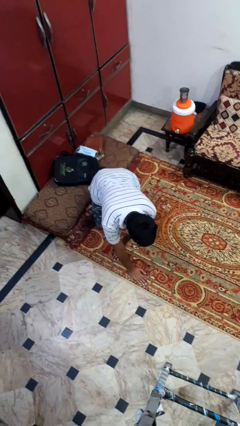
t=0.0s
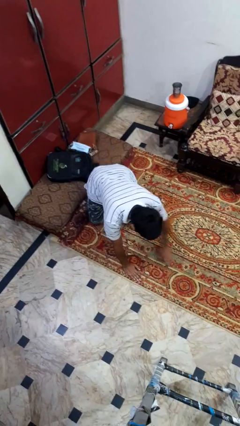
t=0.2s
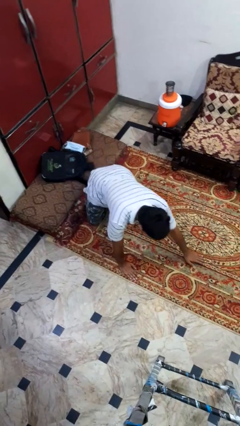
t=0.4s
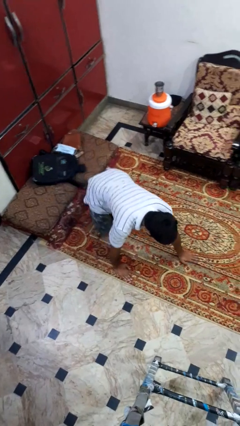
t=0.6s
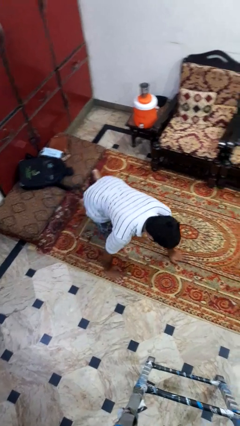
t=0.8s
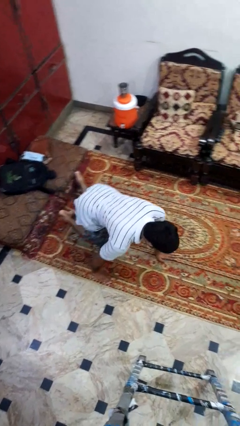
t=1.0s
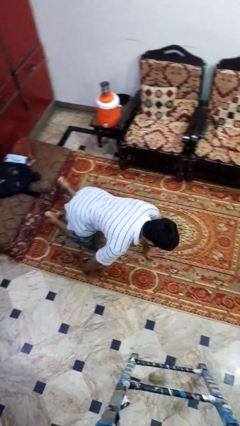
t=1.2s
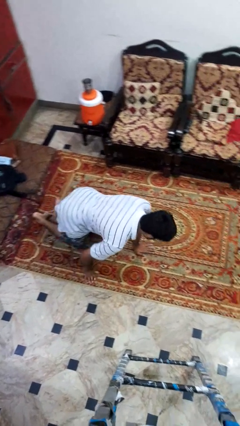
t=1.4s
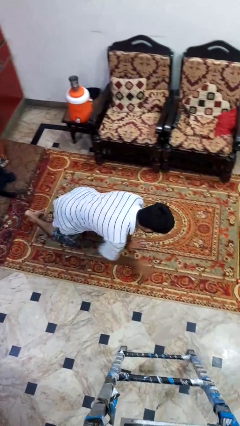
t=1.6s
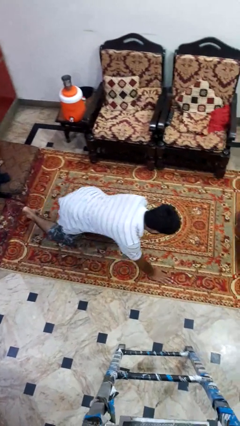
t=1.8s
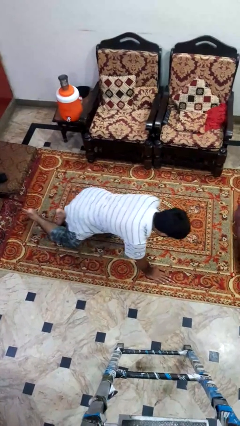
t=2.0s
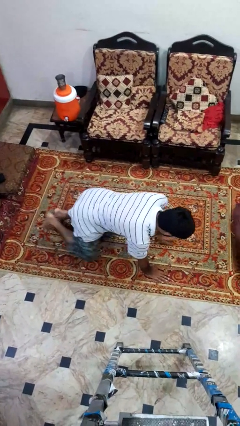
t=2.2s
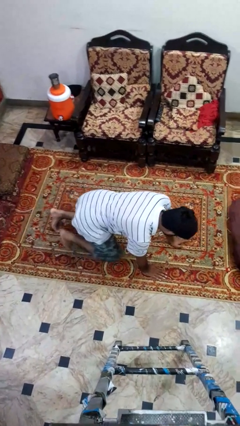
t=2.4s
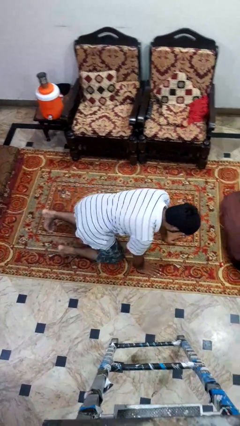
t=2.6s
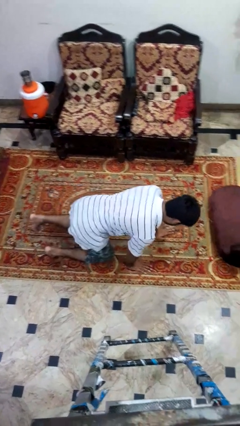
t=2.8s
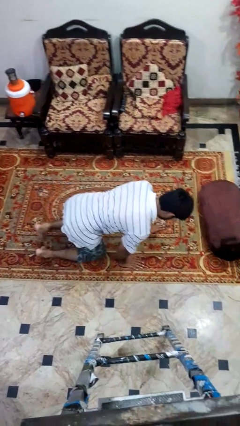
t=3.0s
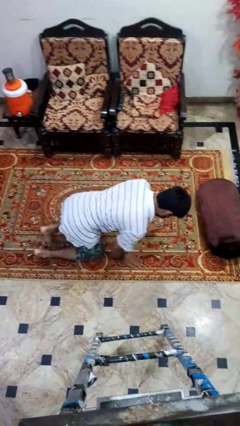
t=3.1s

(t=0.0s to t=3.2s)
person crawls

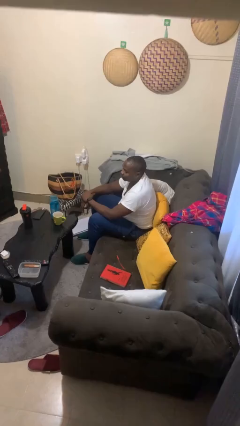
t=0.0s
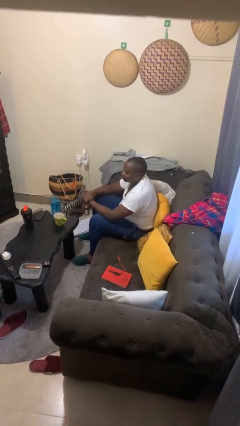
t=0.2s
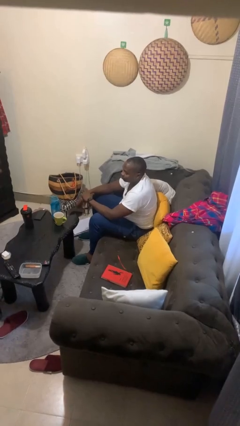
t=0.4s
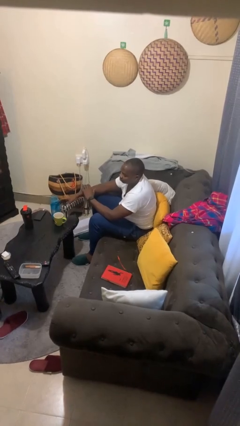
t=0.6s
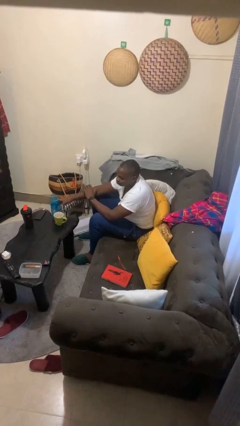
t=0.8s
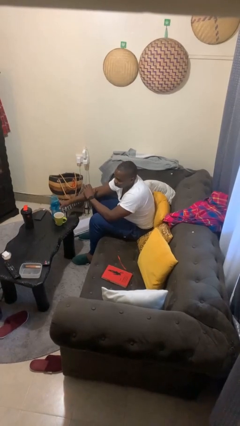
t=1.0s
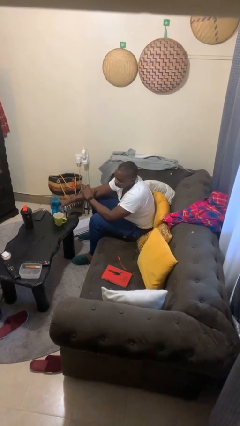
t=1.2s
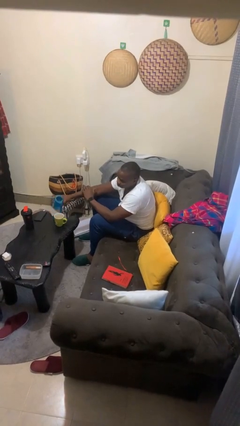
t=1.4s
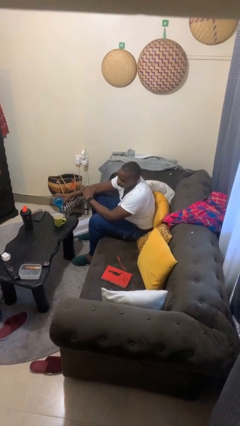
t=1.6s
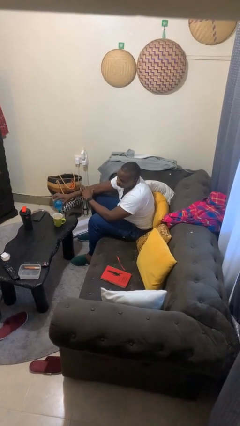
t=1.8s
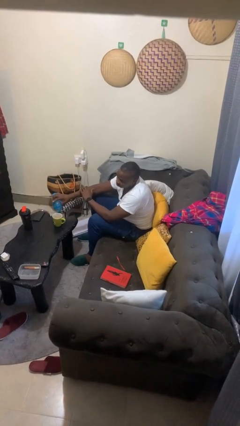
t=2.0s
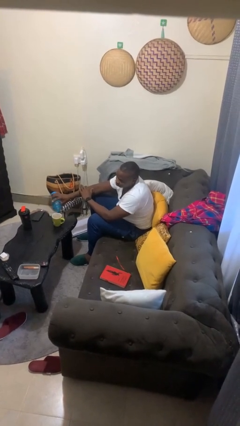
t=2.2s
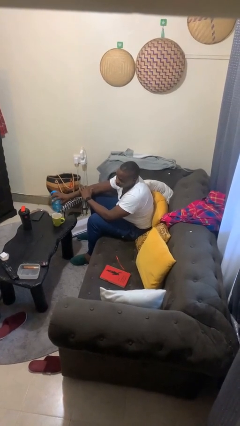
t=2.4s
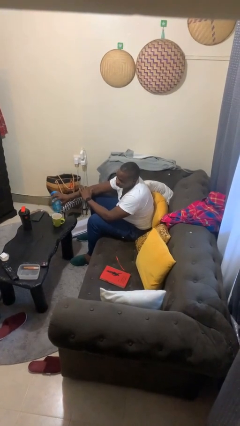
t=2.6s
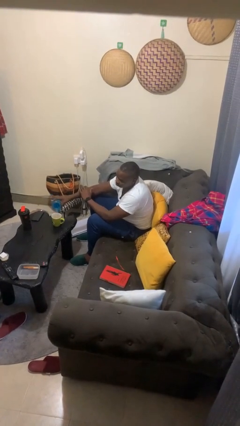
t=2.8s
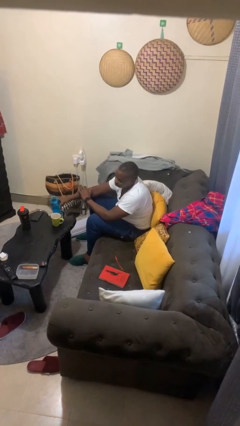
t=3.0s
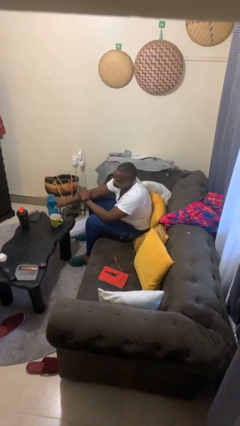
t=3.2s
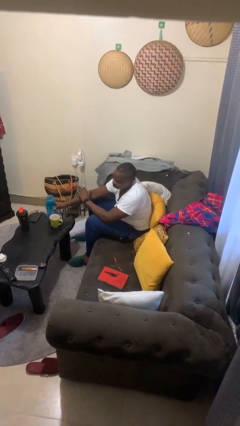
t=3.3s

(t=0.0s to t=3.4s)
person pours liquid into cup

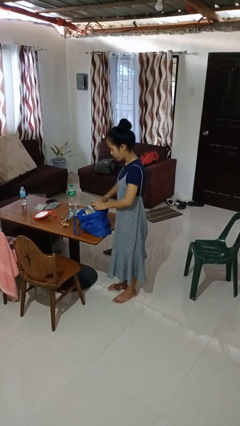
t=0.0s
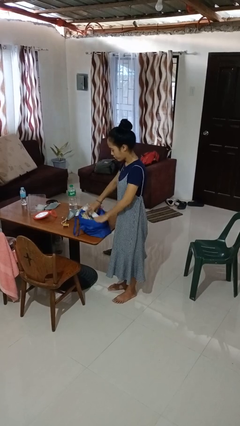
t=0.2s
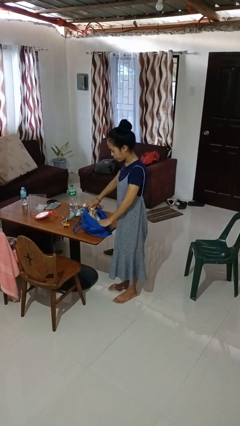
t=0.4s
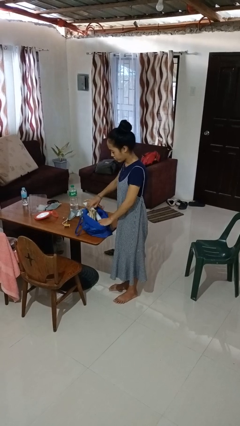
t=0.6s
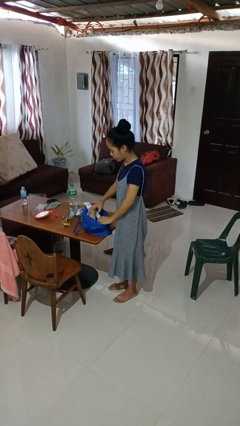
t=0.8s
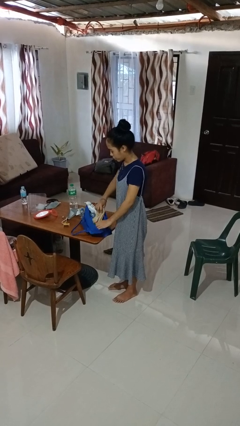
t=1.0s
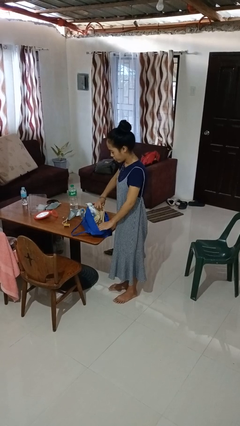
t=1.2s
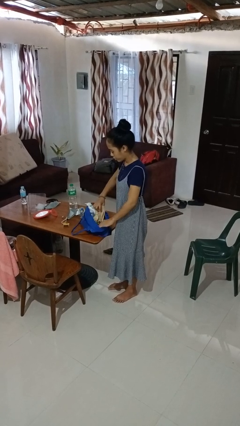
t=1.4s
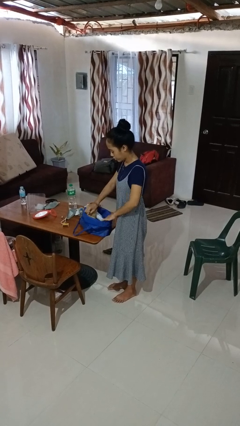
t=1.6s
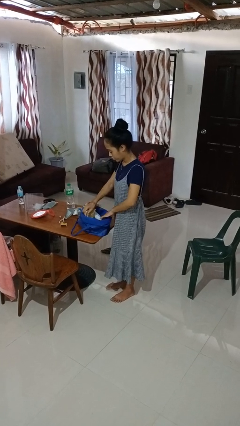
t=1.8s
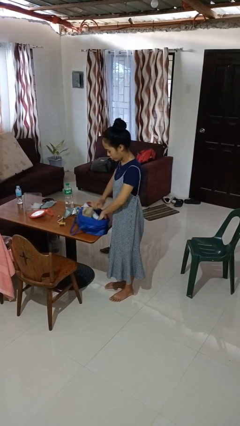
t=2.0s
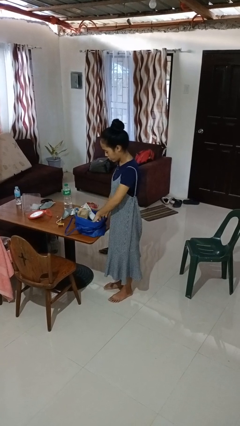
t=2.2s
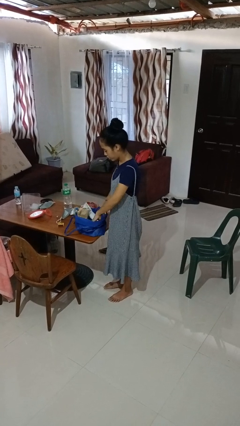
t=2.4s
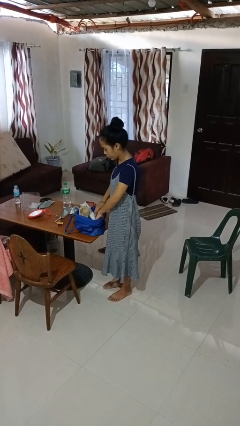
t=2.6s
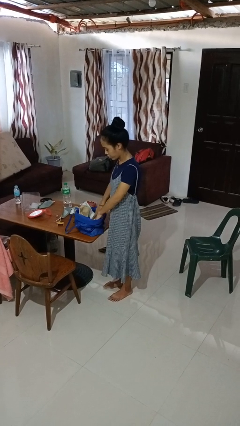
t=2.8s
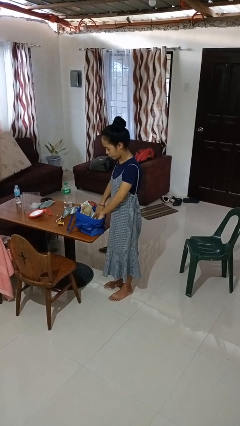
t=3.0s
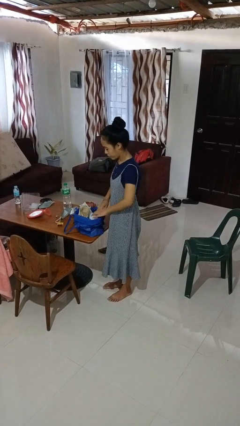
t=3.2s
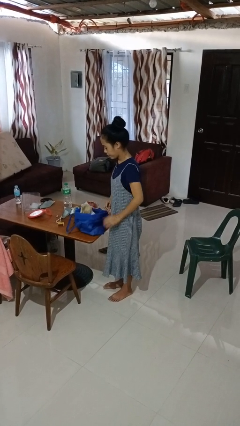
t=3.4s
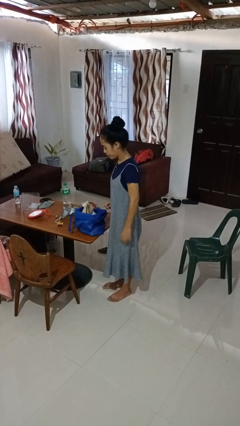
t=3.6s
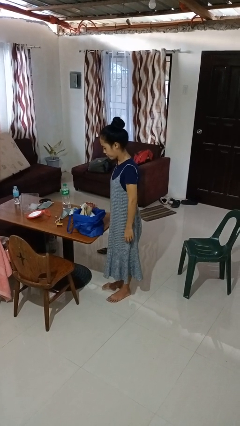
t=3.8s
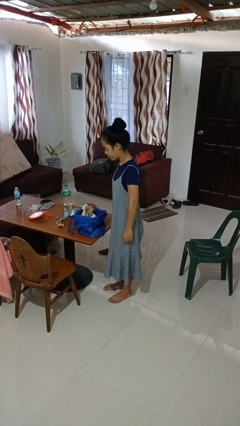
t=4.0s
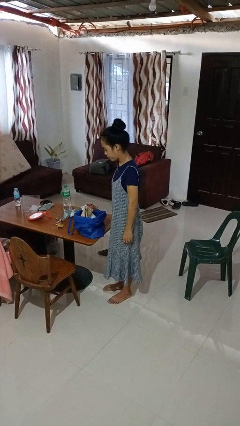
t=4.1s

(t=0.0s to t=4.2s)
person searches in bag

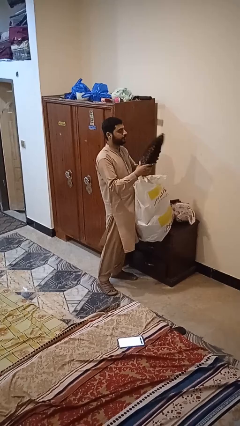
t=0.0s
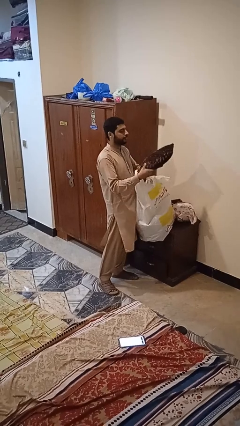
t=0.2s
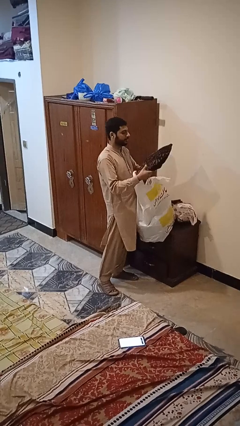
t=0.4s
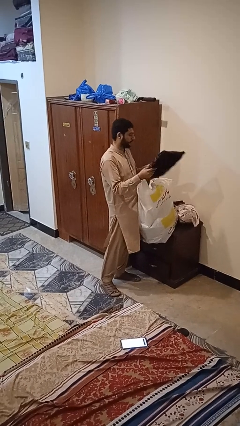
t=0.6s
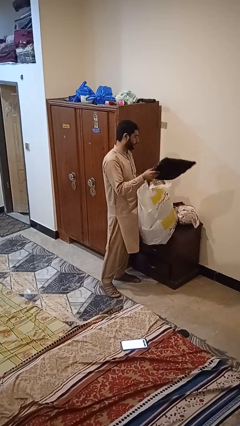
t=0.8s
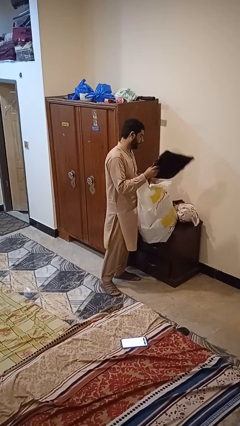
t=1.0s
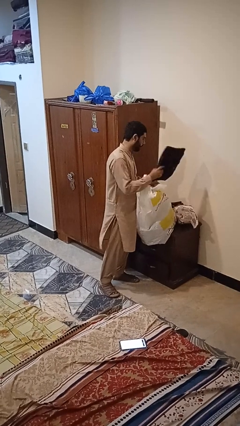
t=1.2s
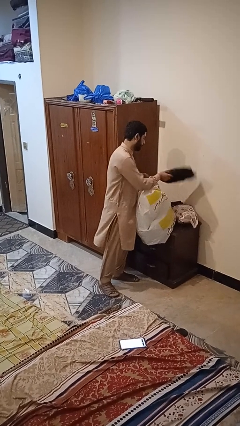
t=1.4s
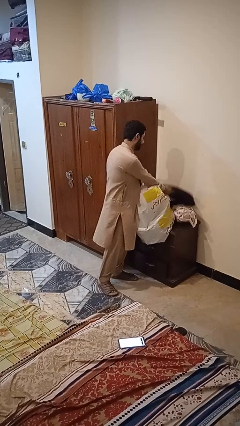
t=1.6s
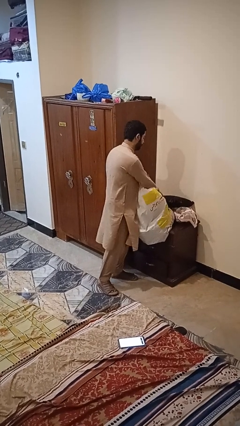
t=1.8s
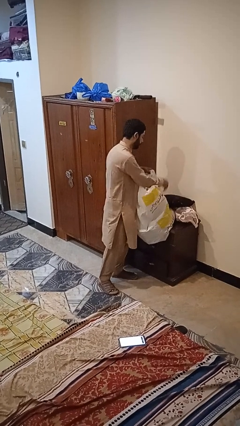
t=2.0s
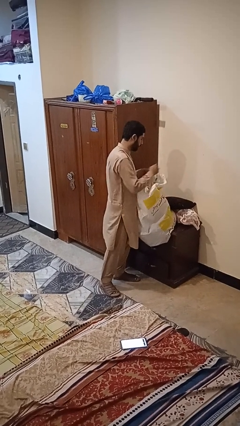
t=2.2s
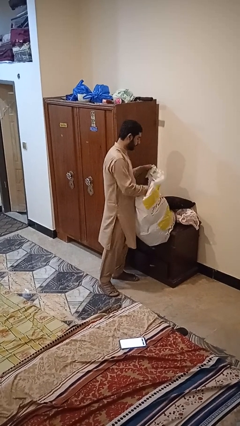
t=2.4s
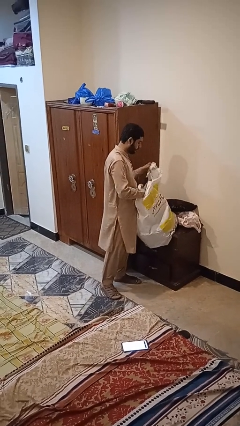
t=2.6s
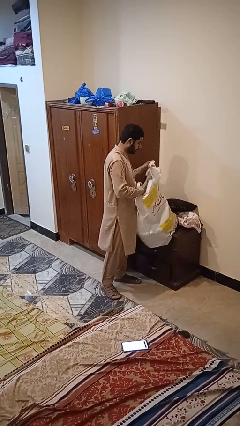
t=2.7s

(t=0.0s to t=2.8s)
person puts object into bag

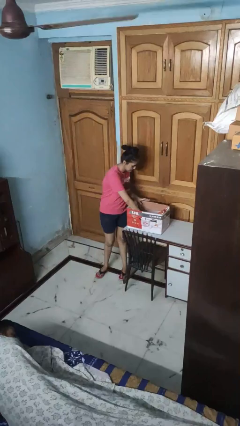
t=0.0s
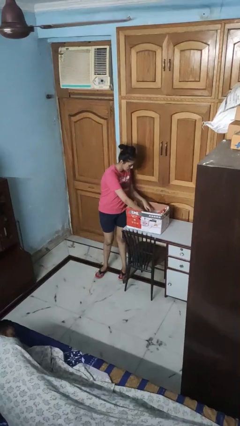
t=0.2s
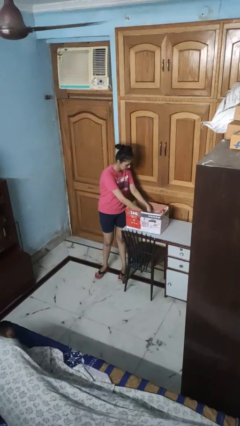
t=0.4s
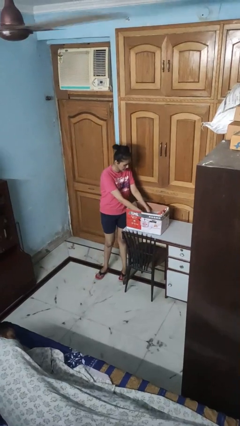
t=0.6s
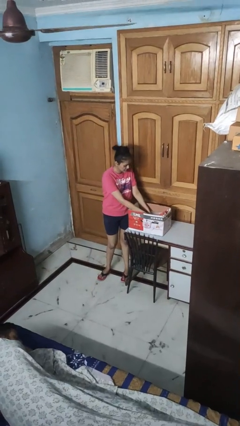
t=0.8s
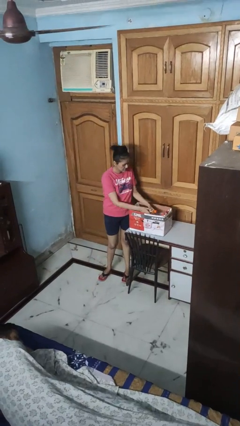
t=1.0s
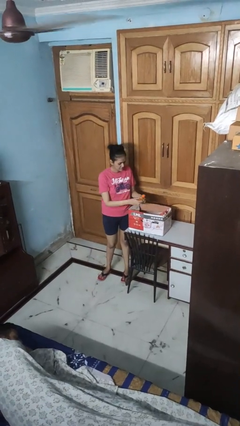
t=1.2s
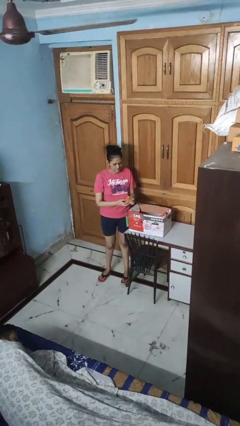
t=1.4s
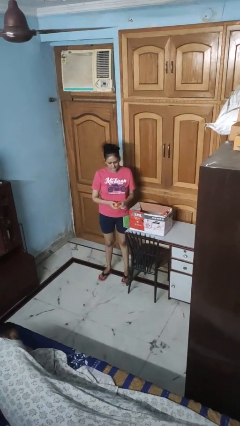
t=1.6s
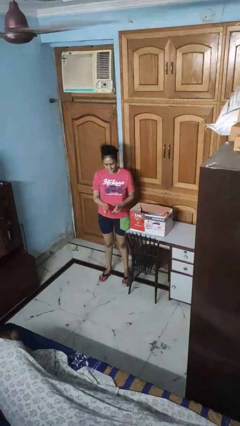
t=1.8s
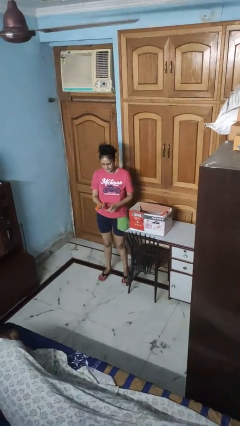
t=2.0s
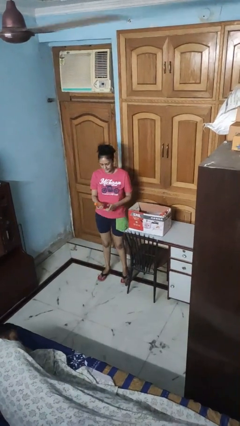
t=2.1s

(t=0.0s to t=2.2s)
person takes object from box

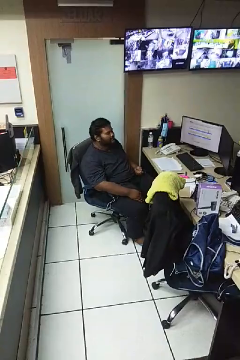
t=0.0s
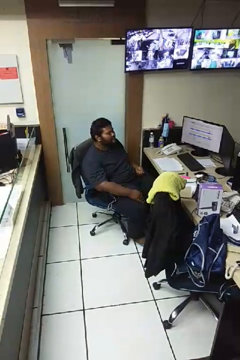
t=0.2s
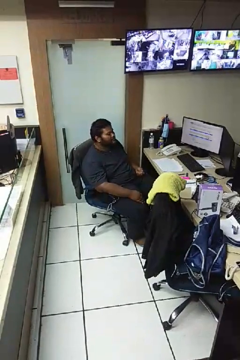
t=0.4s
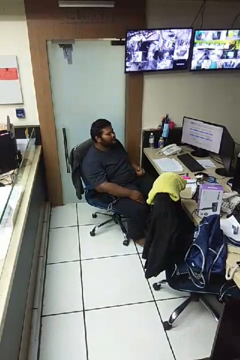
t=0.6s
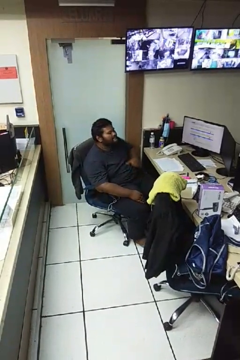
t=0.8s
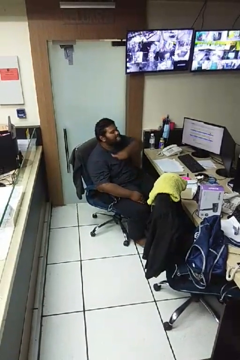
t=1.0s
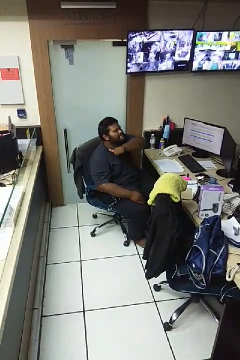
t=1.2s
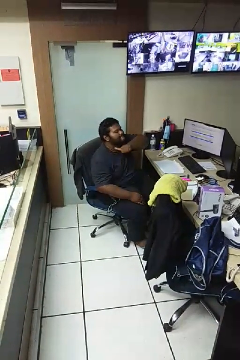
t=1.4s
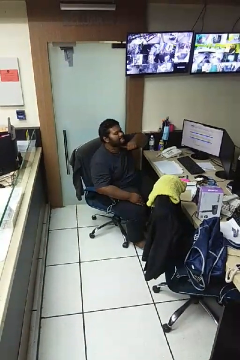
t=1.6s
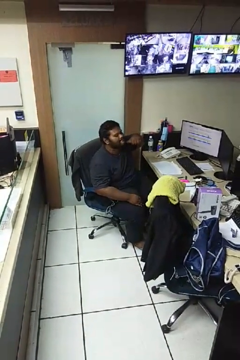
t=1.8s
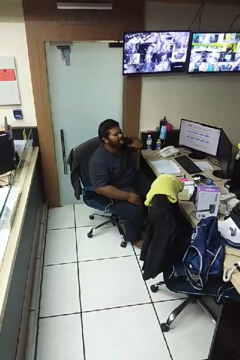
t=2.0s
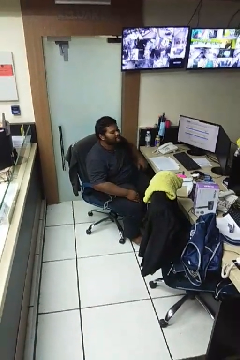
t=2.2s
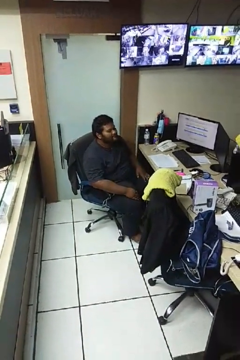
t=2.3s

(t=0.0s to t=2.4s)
person gestures cut
